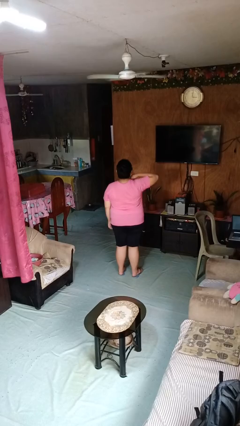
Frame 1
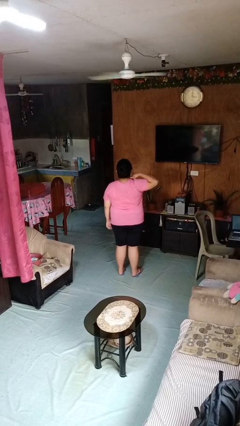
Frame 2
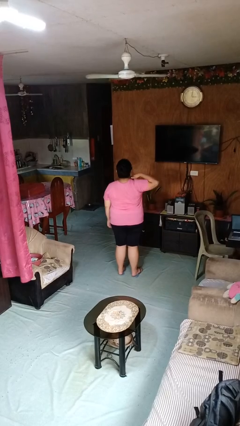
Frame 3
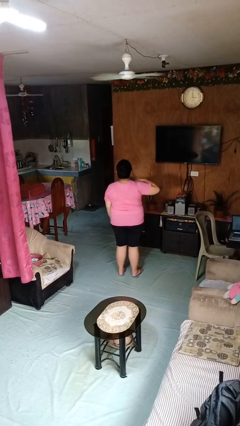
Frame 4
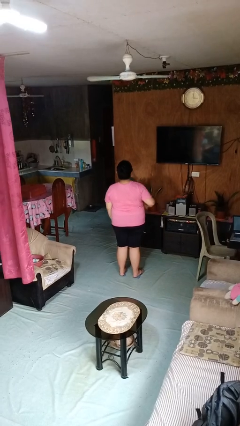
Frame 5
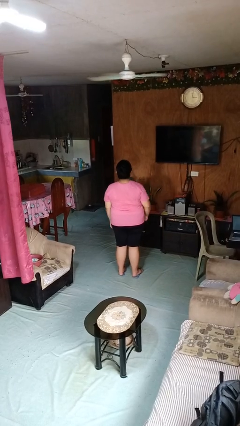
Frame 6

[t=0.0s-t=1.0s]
person gestures cut

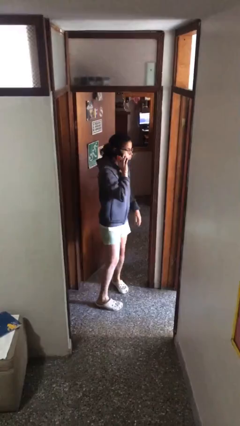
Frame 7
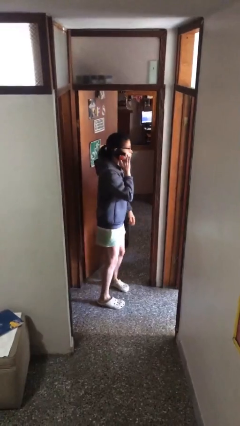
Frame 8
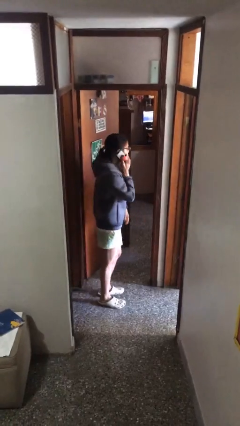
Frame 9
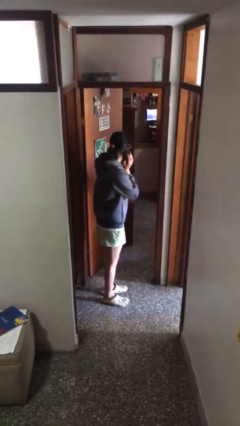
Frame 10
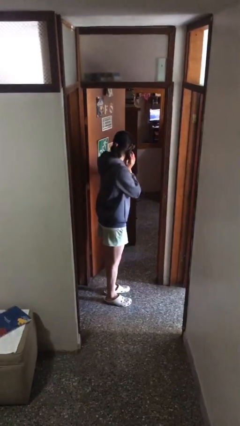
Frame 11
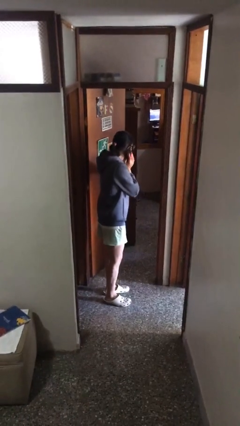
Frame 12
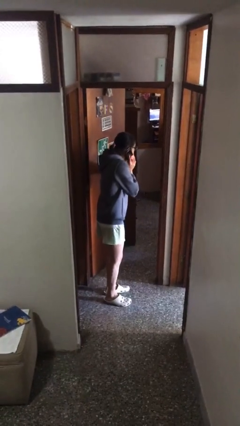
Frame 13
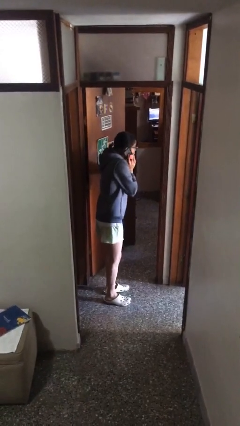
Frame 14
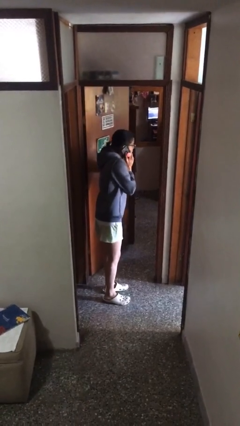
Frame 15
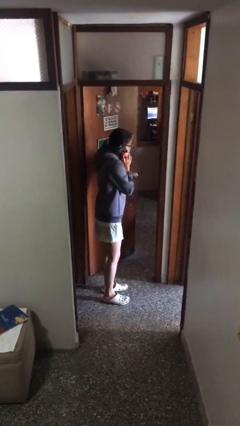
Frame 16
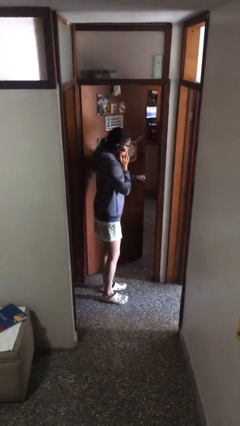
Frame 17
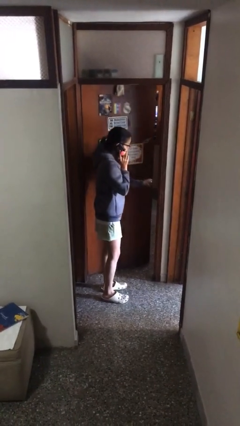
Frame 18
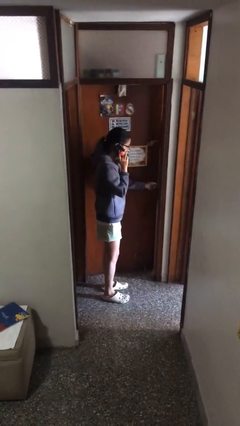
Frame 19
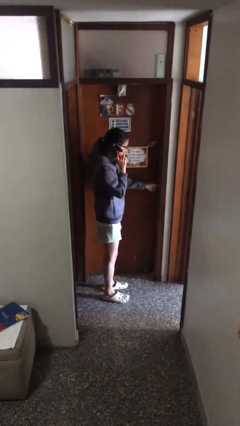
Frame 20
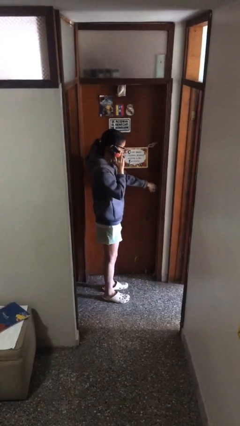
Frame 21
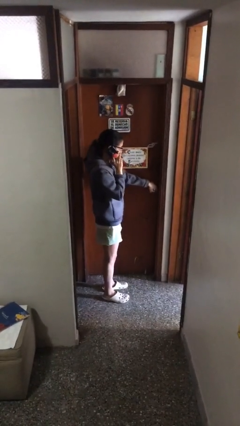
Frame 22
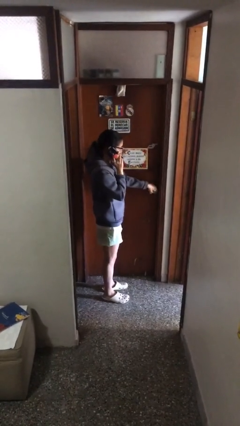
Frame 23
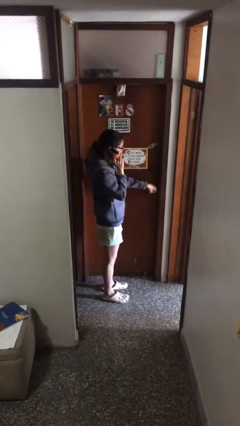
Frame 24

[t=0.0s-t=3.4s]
person closes facility door

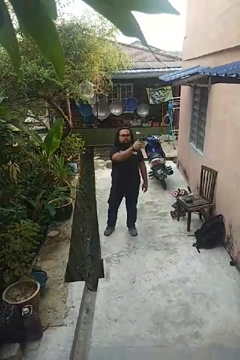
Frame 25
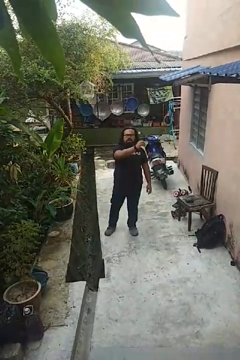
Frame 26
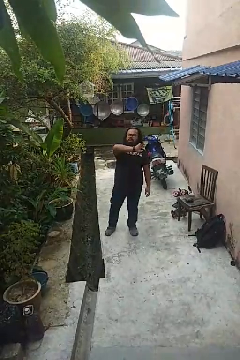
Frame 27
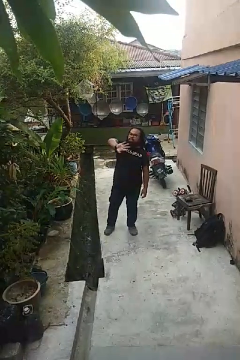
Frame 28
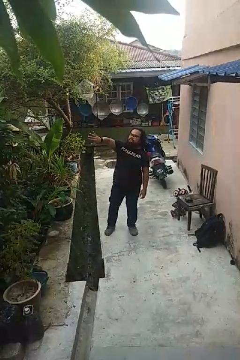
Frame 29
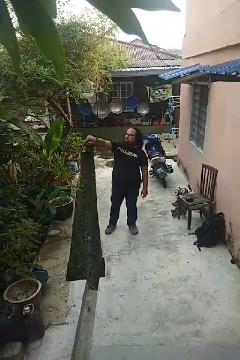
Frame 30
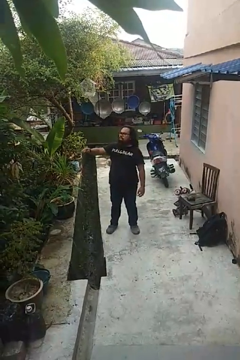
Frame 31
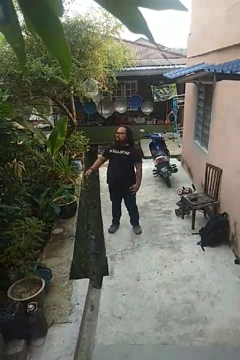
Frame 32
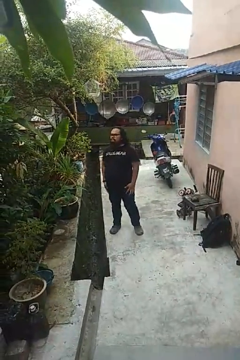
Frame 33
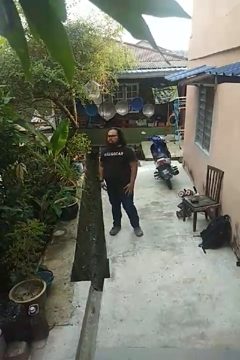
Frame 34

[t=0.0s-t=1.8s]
person gestures swipe right

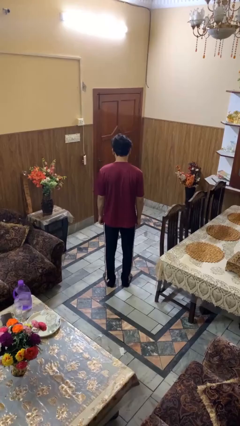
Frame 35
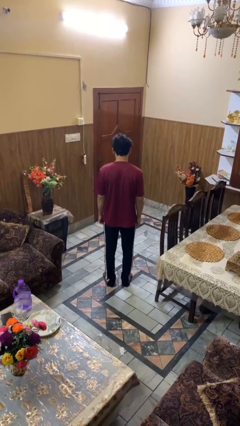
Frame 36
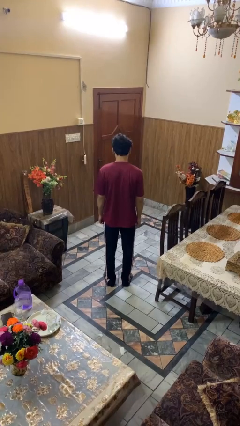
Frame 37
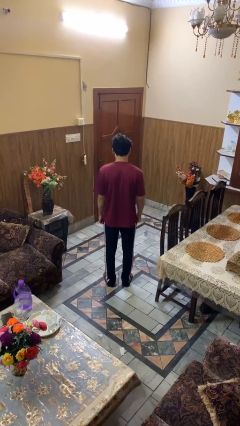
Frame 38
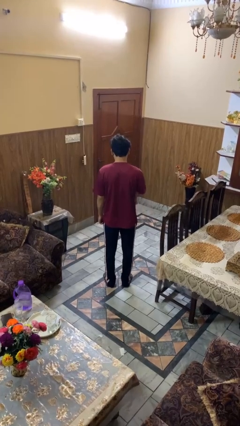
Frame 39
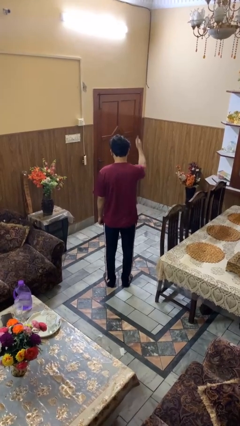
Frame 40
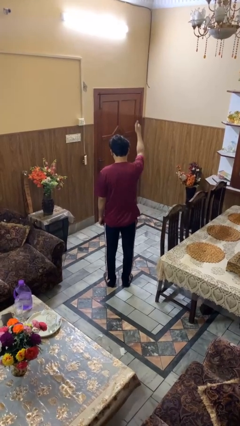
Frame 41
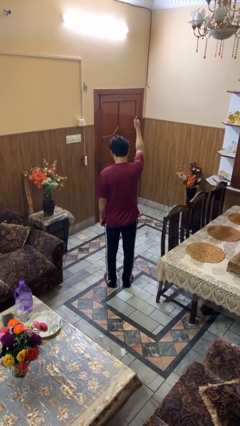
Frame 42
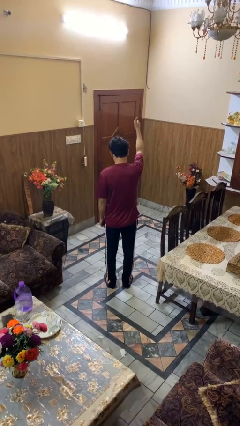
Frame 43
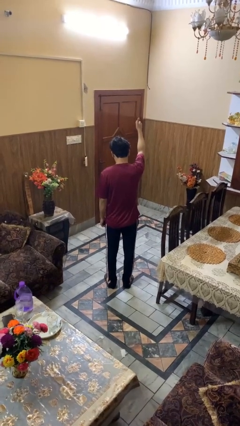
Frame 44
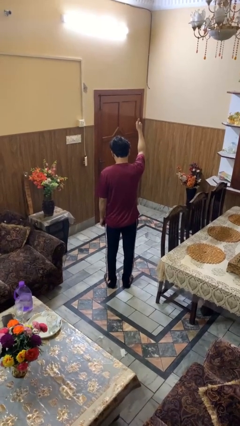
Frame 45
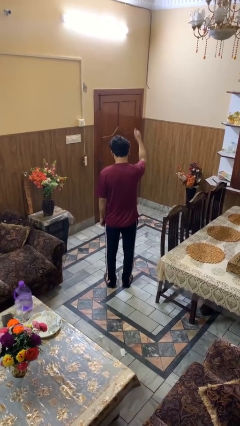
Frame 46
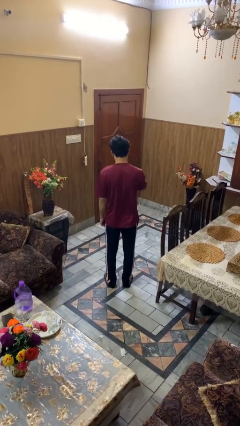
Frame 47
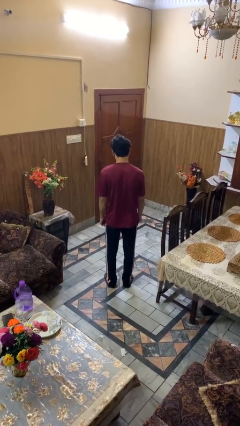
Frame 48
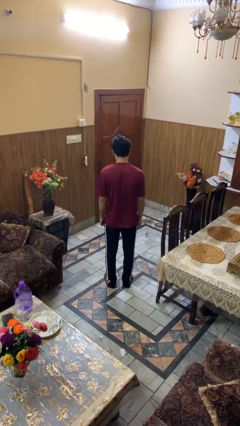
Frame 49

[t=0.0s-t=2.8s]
person gestures thumbs up

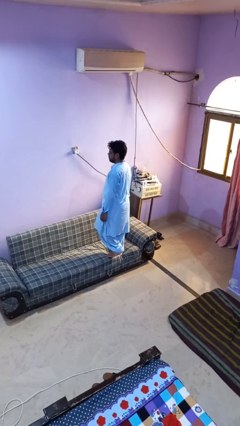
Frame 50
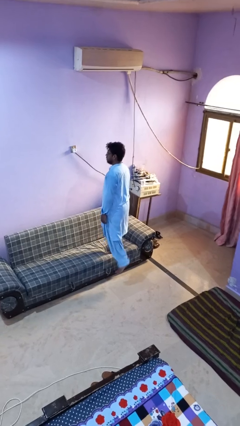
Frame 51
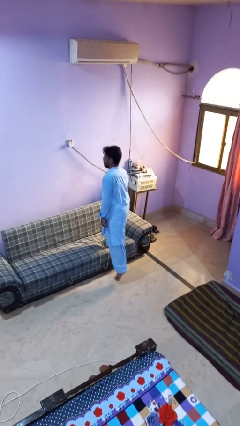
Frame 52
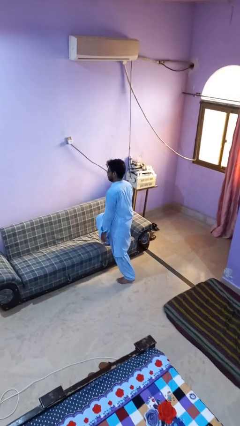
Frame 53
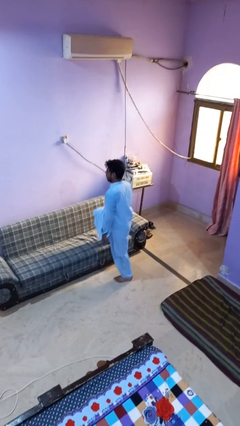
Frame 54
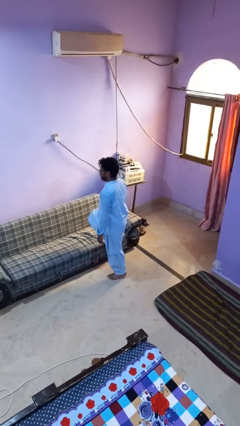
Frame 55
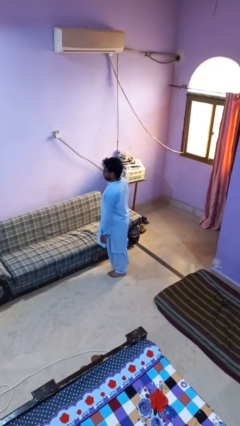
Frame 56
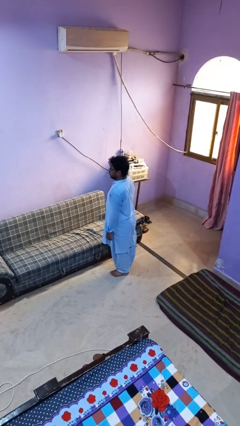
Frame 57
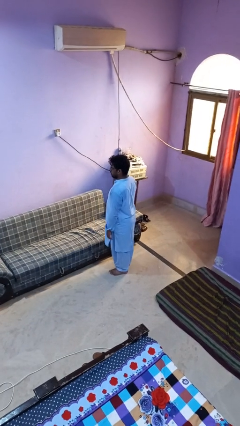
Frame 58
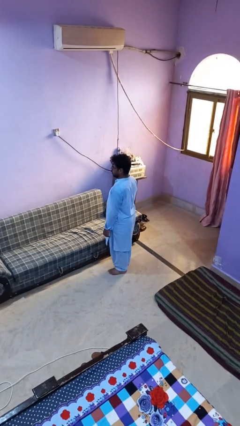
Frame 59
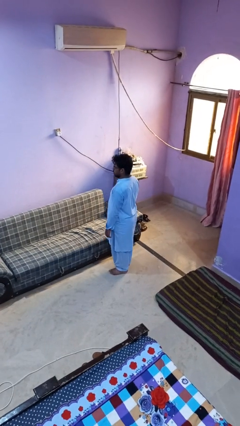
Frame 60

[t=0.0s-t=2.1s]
person climbs off couch

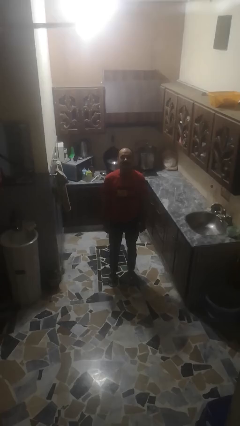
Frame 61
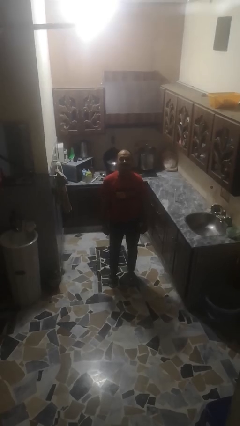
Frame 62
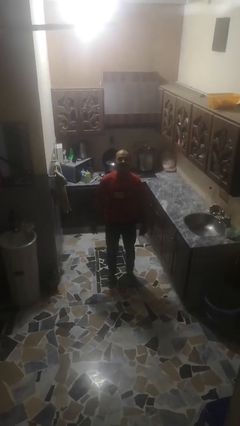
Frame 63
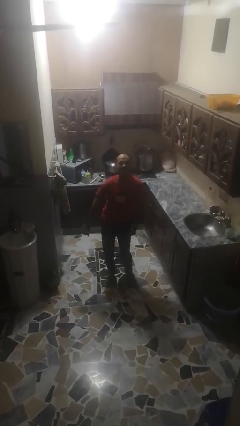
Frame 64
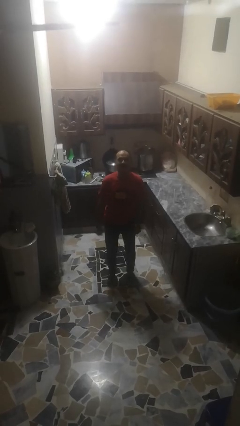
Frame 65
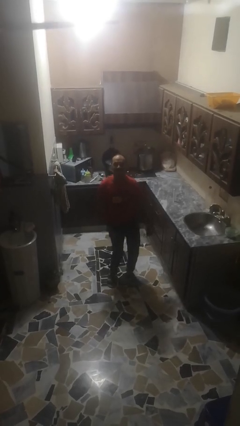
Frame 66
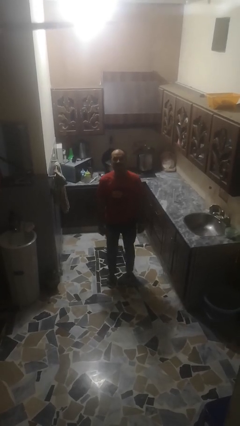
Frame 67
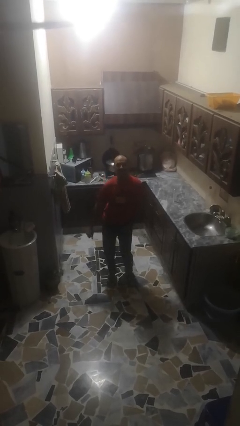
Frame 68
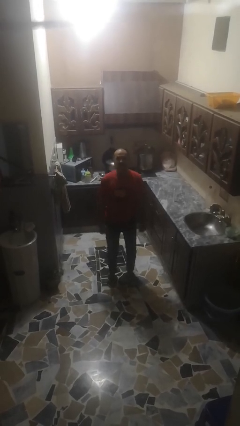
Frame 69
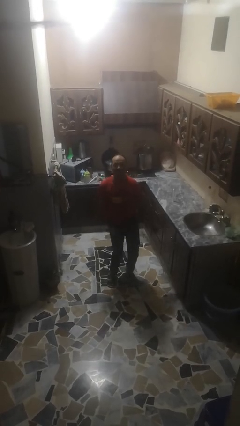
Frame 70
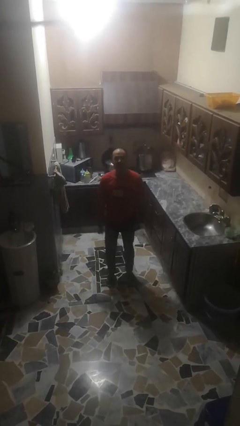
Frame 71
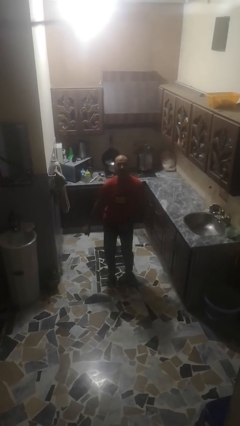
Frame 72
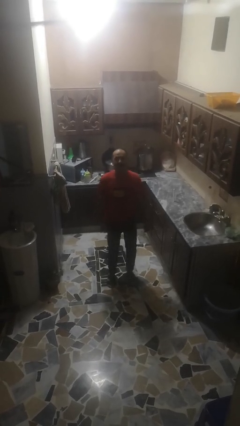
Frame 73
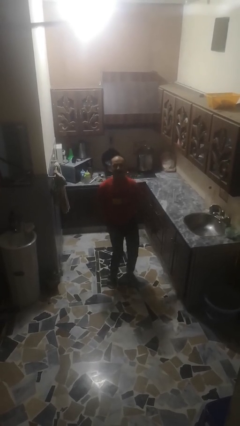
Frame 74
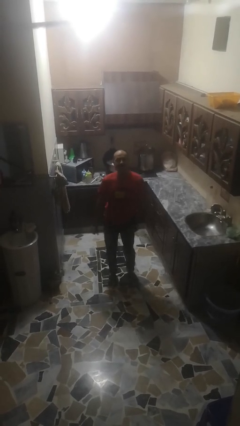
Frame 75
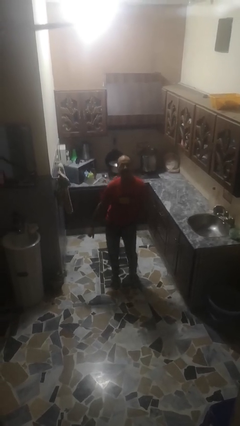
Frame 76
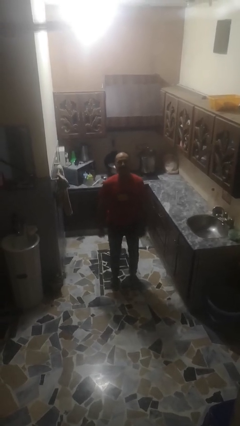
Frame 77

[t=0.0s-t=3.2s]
person wiggles hips

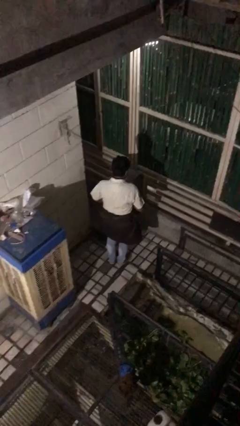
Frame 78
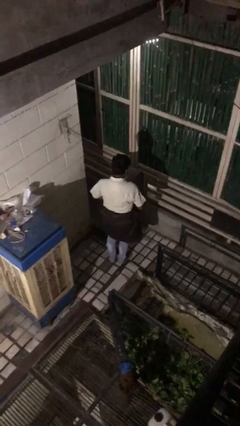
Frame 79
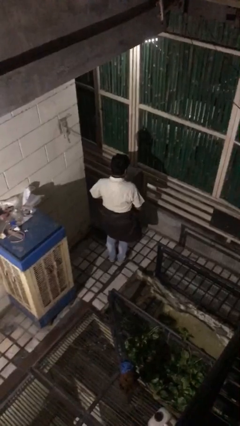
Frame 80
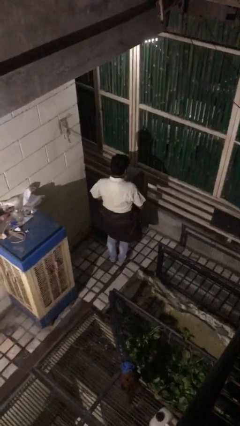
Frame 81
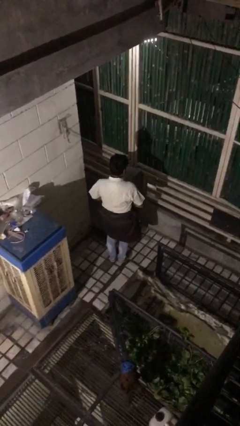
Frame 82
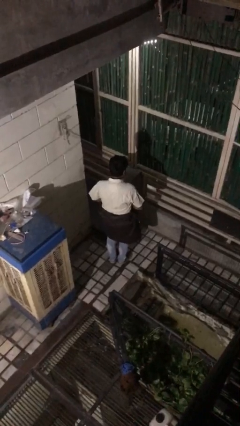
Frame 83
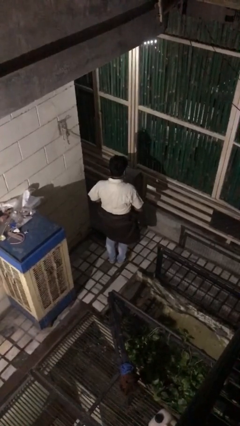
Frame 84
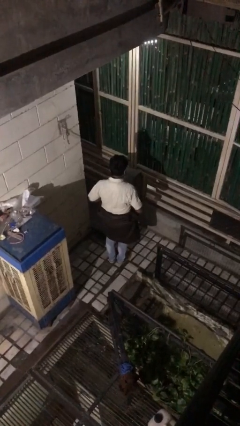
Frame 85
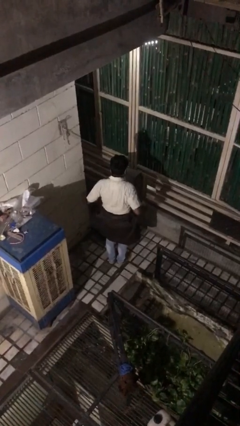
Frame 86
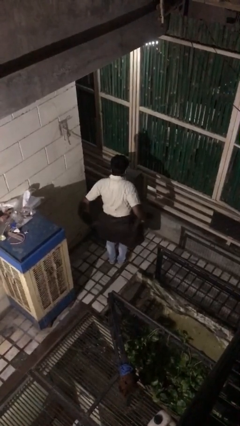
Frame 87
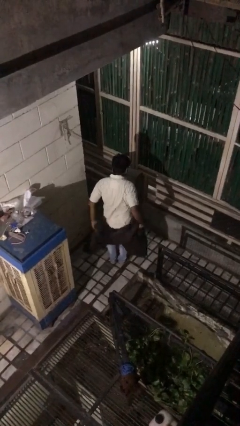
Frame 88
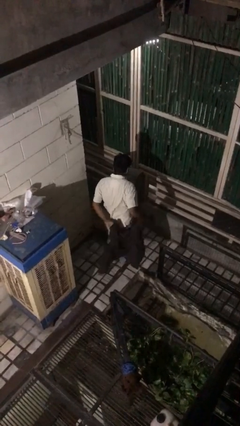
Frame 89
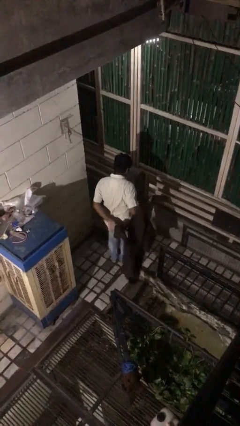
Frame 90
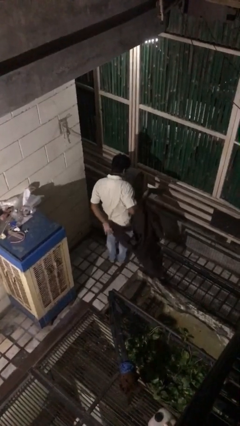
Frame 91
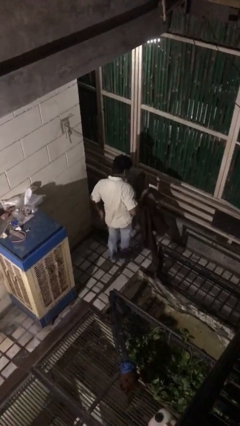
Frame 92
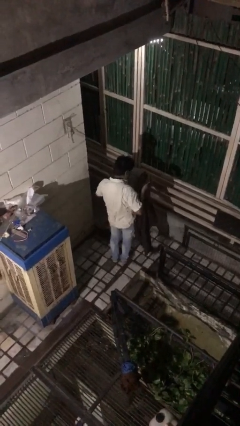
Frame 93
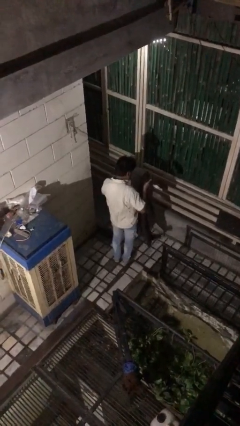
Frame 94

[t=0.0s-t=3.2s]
person unties jacket around waist
